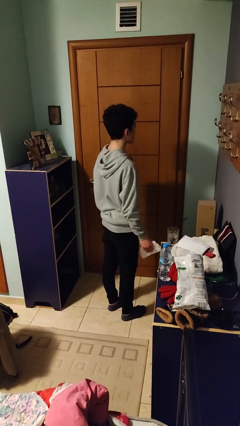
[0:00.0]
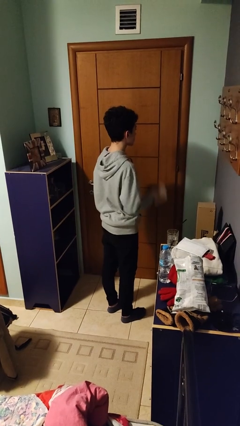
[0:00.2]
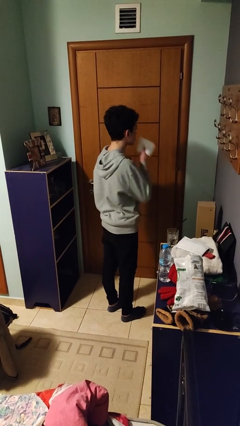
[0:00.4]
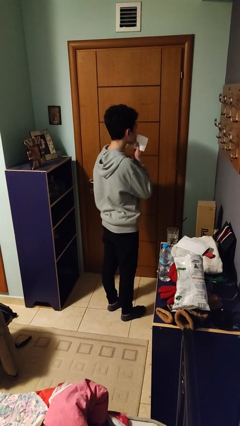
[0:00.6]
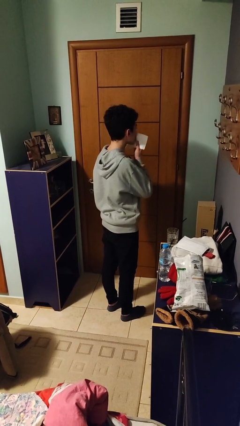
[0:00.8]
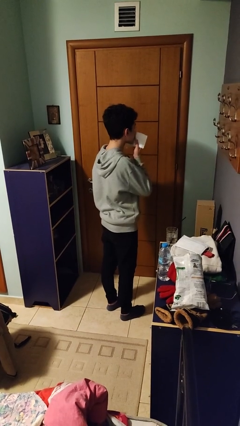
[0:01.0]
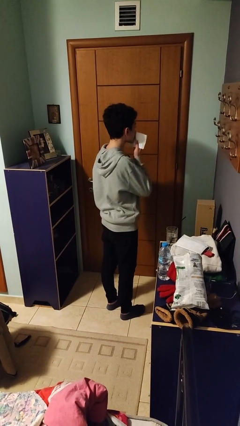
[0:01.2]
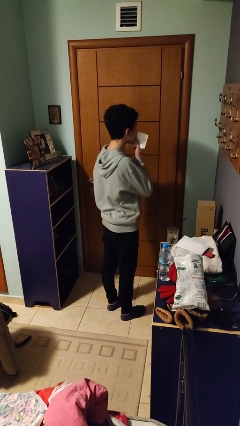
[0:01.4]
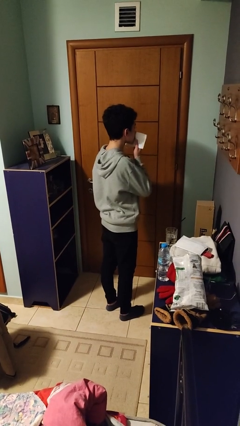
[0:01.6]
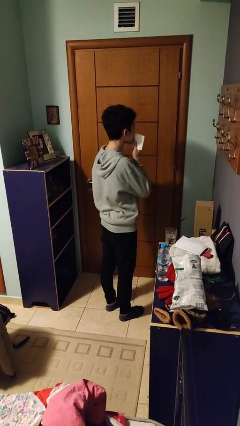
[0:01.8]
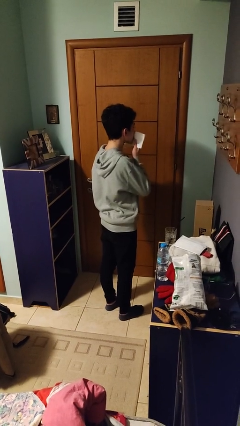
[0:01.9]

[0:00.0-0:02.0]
person wipes mouth with napkin

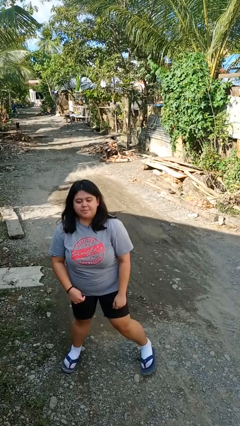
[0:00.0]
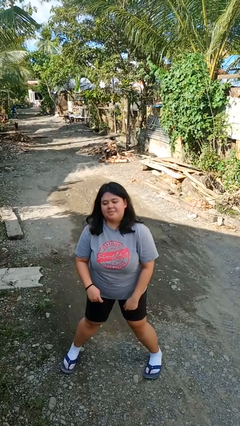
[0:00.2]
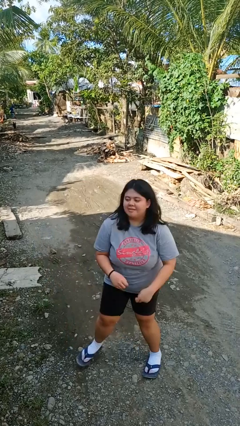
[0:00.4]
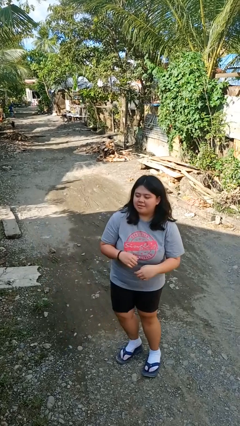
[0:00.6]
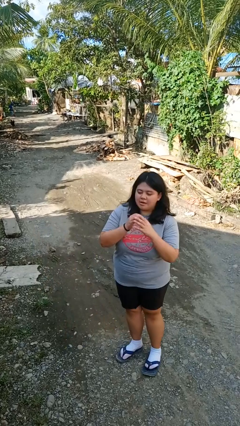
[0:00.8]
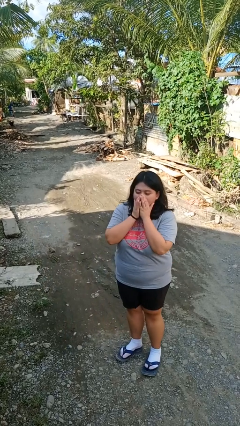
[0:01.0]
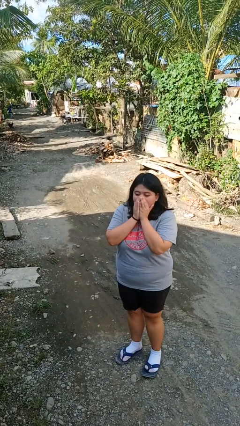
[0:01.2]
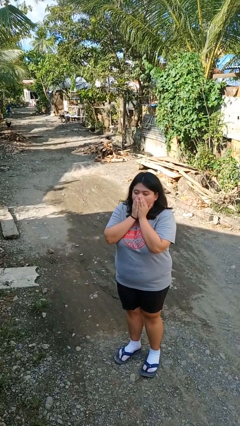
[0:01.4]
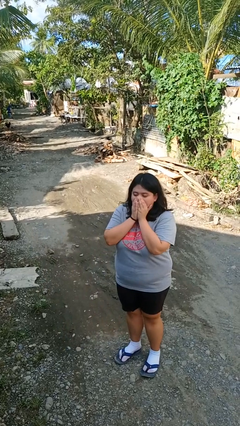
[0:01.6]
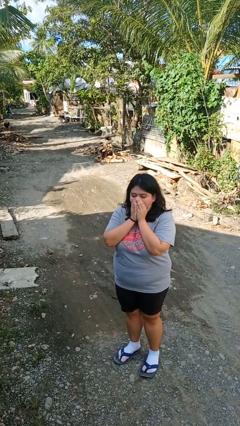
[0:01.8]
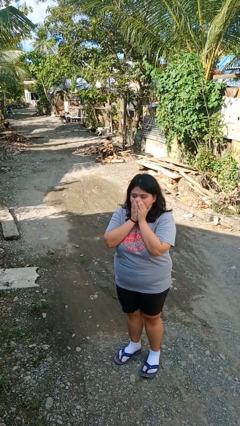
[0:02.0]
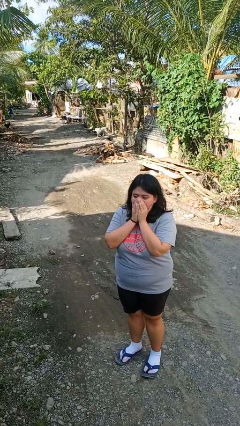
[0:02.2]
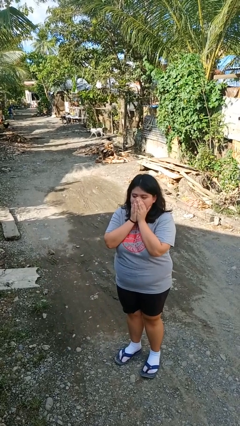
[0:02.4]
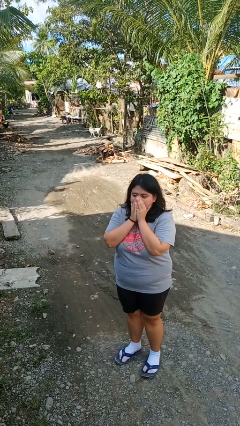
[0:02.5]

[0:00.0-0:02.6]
person blows into hands

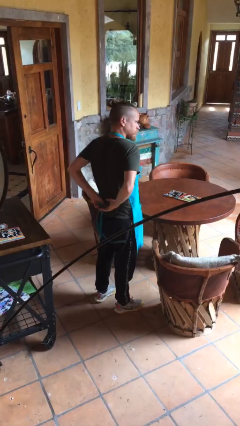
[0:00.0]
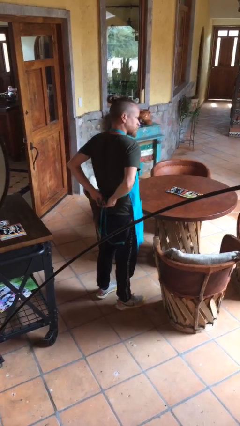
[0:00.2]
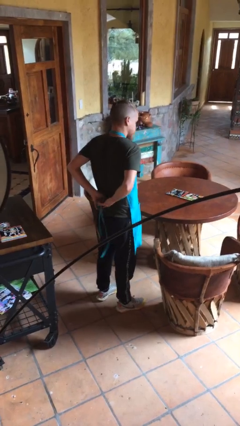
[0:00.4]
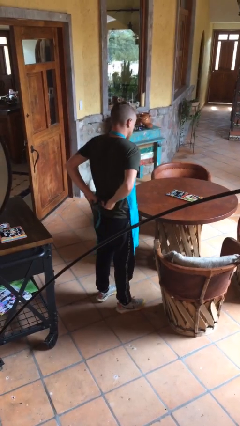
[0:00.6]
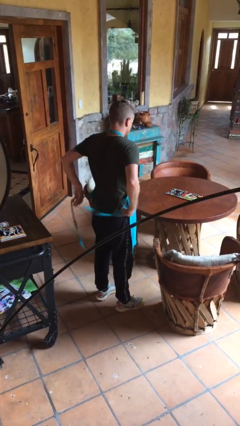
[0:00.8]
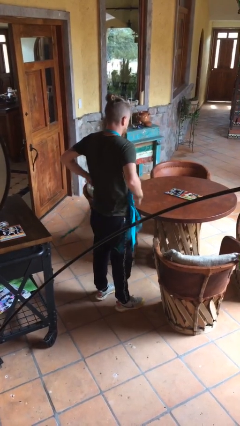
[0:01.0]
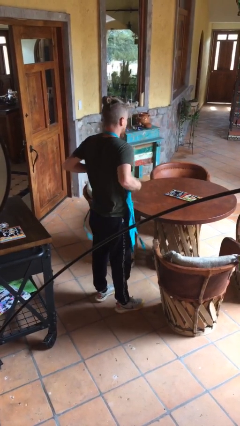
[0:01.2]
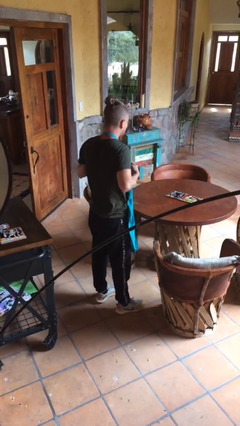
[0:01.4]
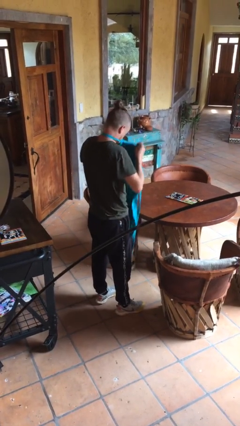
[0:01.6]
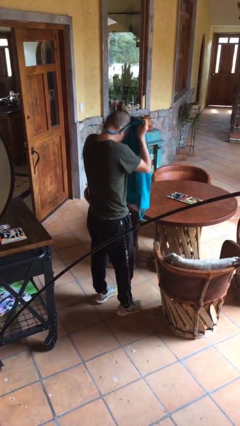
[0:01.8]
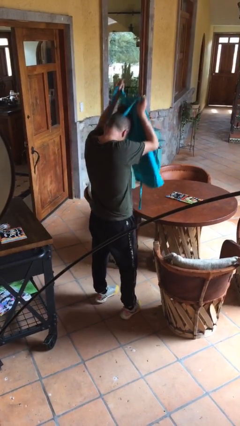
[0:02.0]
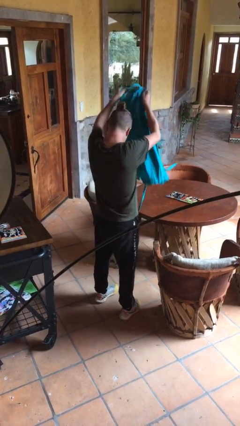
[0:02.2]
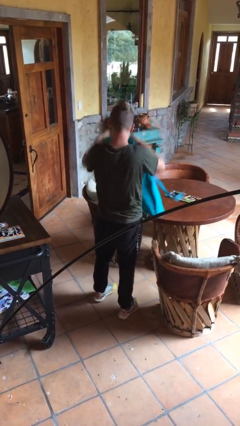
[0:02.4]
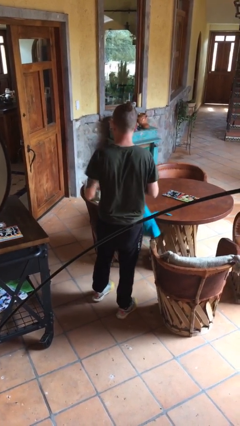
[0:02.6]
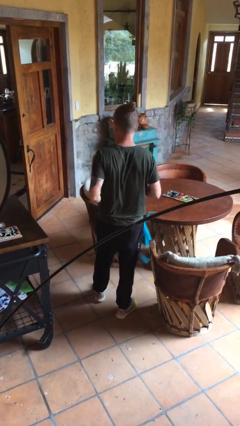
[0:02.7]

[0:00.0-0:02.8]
person takes off apron

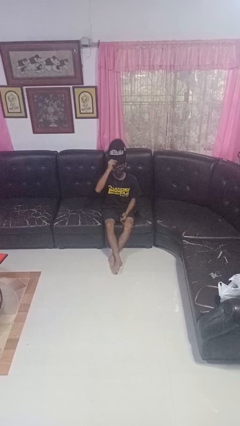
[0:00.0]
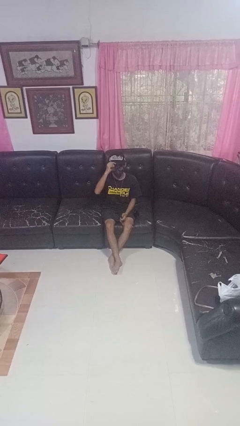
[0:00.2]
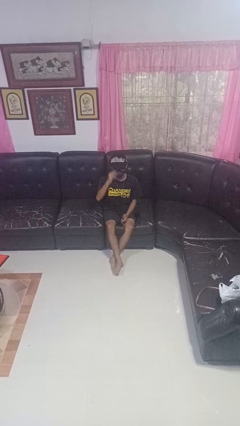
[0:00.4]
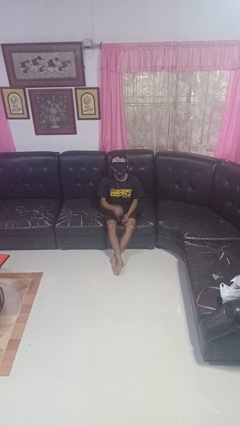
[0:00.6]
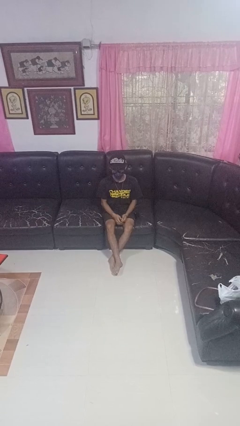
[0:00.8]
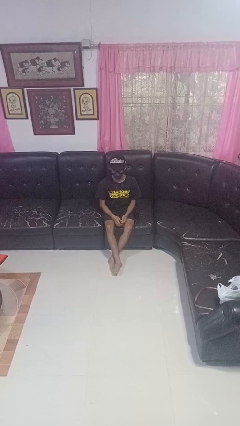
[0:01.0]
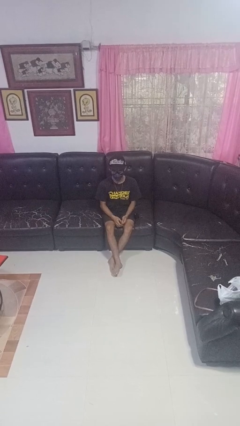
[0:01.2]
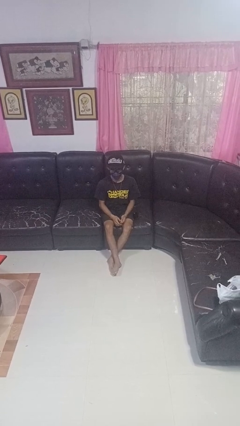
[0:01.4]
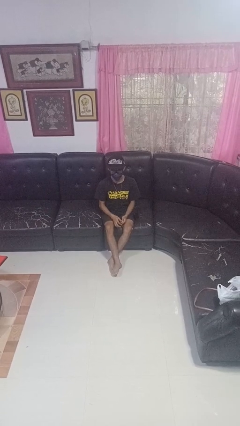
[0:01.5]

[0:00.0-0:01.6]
person puts on hat

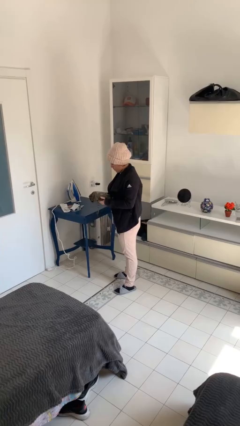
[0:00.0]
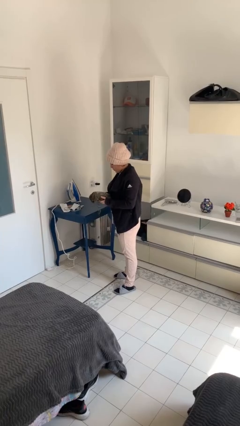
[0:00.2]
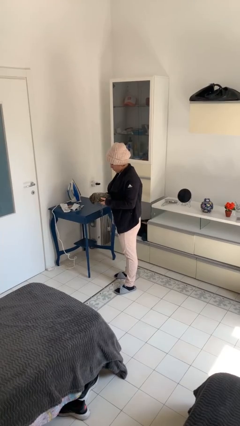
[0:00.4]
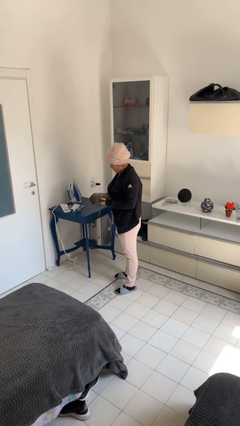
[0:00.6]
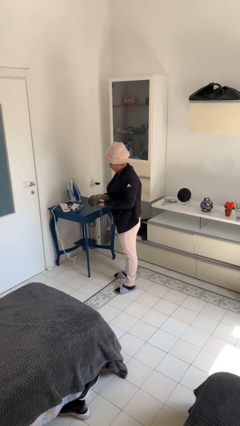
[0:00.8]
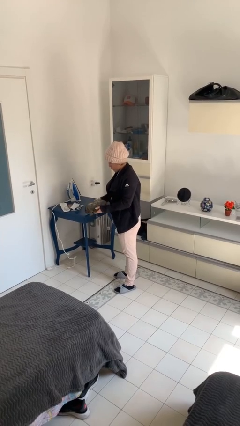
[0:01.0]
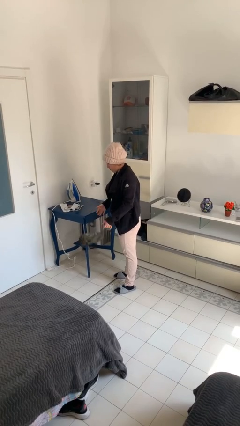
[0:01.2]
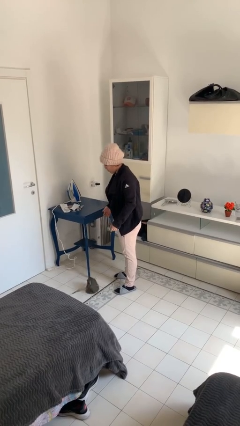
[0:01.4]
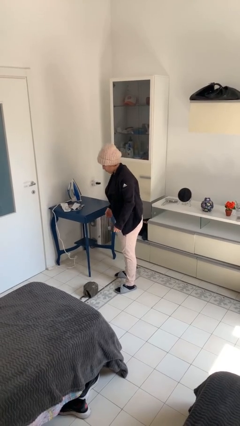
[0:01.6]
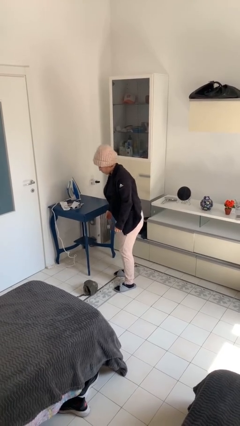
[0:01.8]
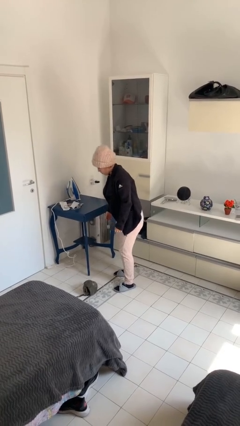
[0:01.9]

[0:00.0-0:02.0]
person drops object

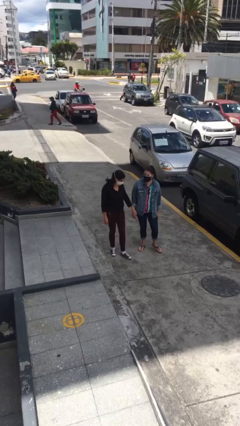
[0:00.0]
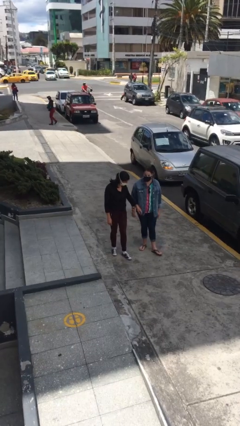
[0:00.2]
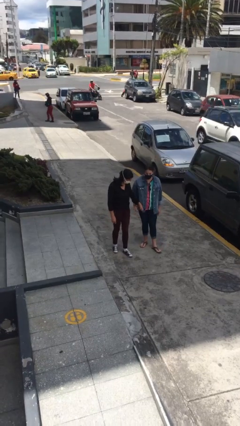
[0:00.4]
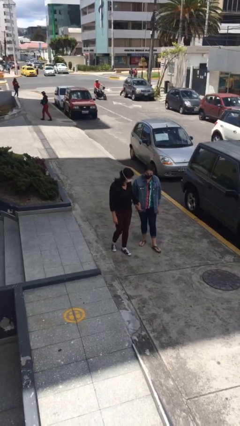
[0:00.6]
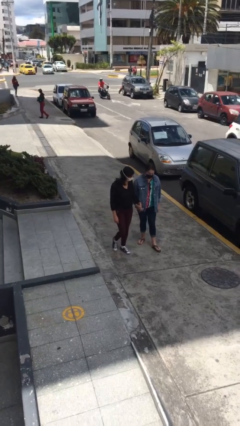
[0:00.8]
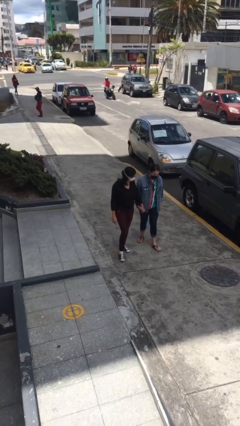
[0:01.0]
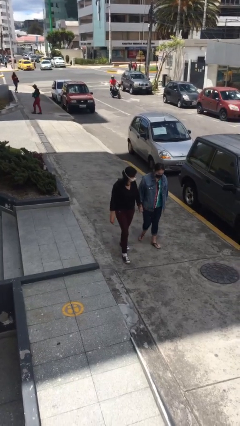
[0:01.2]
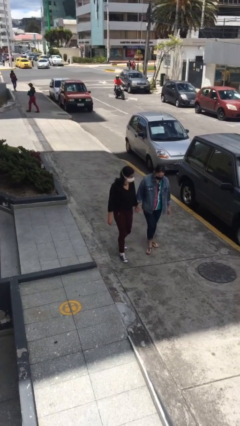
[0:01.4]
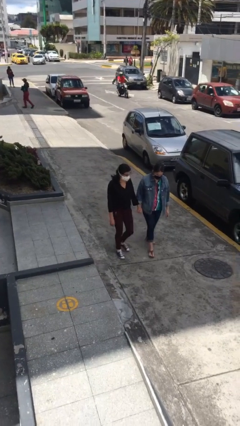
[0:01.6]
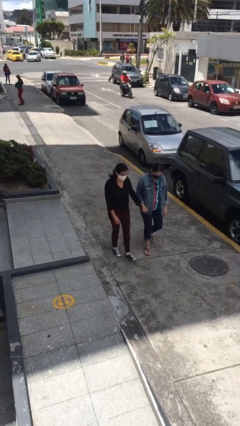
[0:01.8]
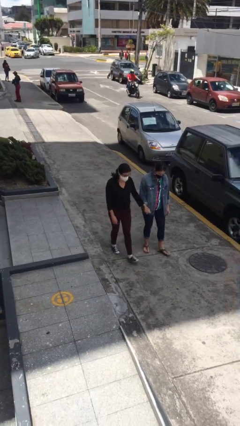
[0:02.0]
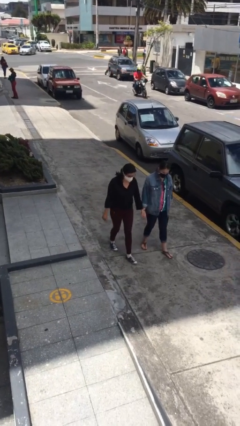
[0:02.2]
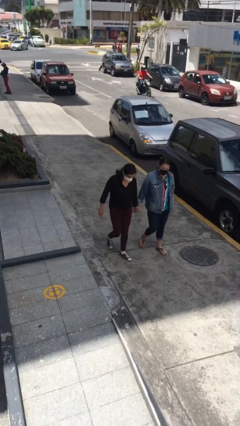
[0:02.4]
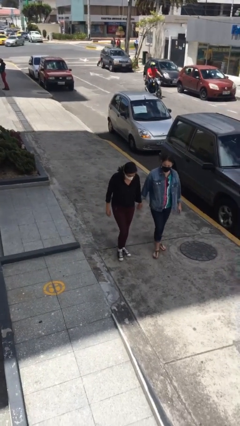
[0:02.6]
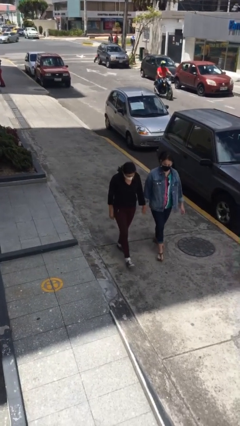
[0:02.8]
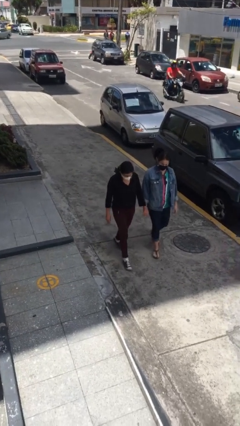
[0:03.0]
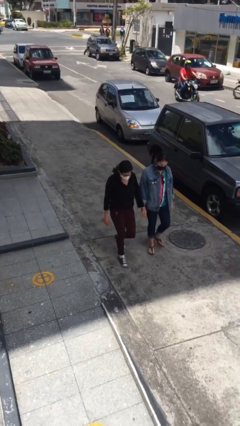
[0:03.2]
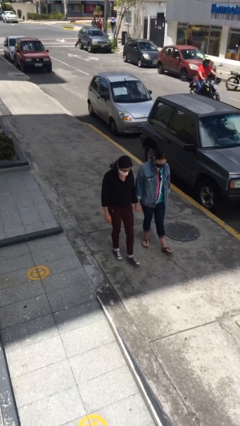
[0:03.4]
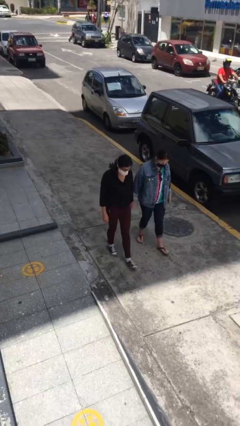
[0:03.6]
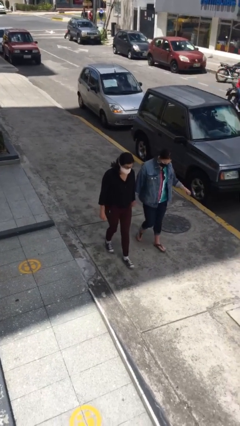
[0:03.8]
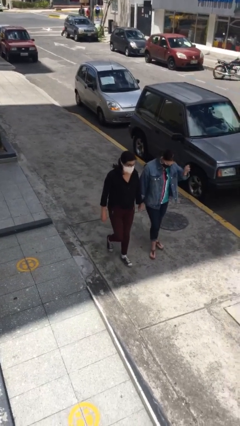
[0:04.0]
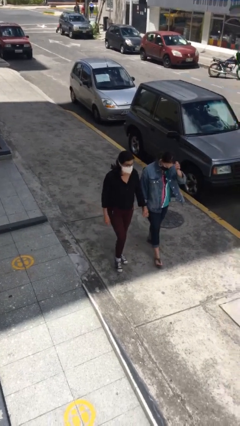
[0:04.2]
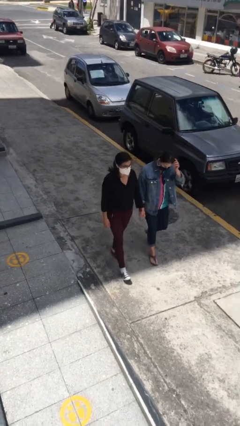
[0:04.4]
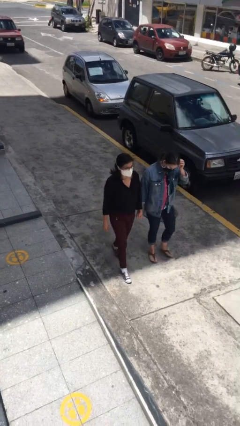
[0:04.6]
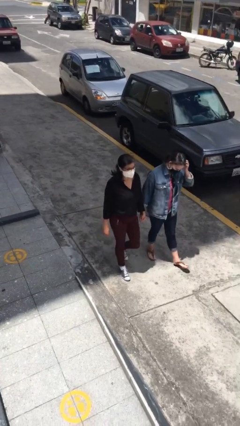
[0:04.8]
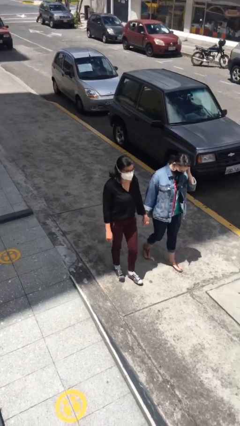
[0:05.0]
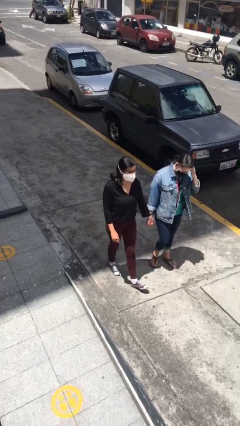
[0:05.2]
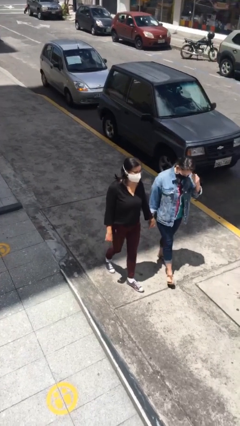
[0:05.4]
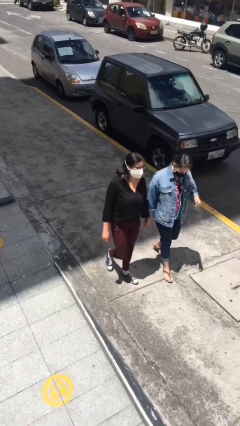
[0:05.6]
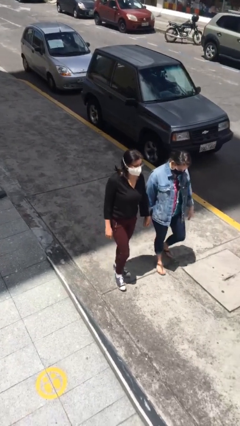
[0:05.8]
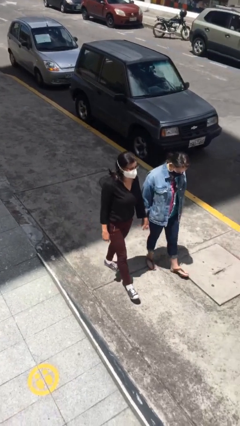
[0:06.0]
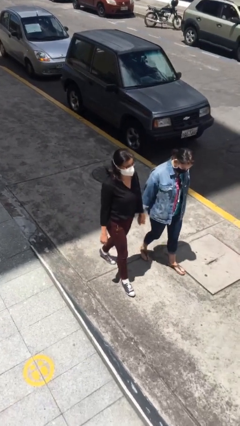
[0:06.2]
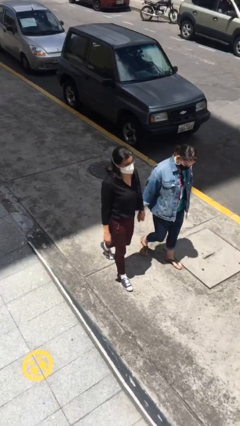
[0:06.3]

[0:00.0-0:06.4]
person holds hand
